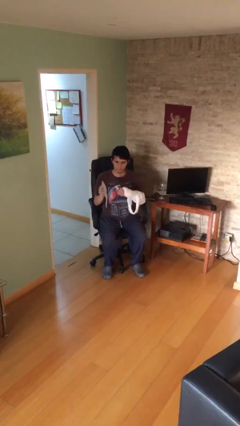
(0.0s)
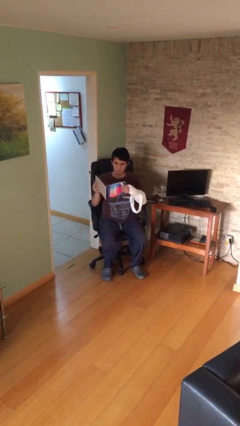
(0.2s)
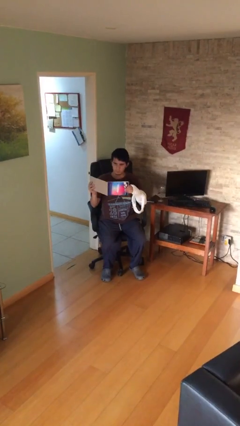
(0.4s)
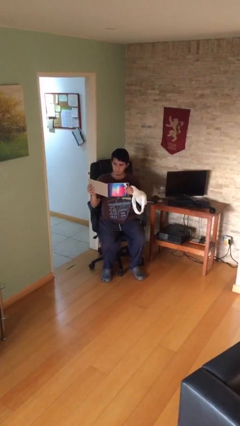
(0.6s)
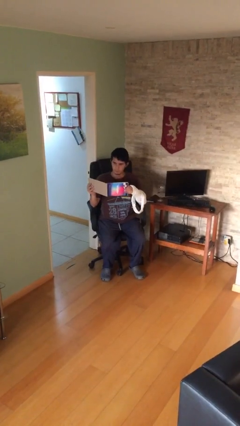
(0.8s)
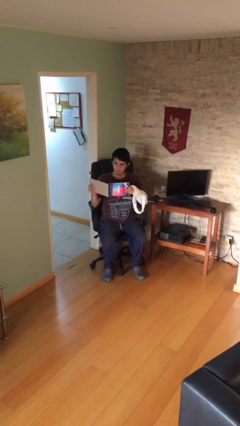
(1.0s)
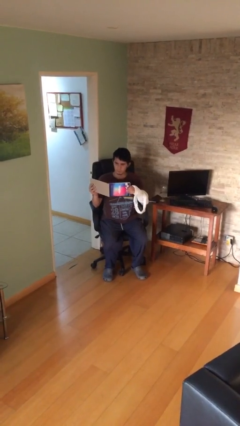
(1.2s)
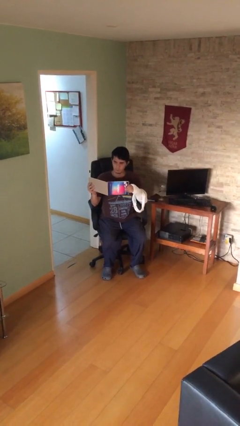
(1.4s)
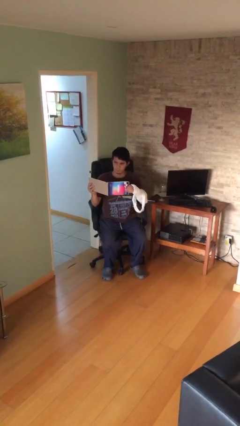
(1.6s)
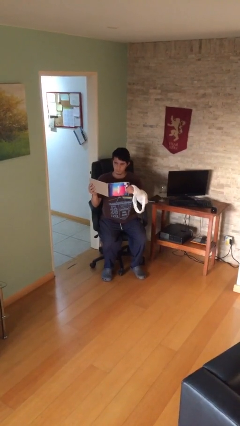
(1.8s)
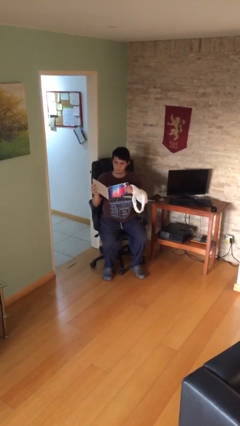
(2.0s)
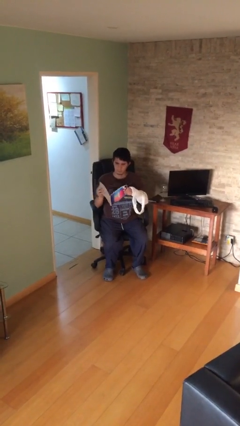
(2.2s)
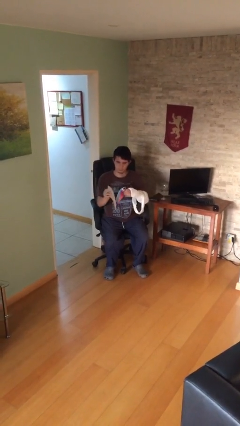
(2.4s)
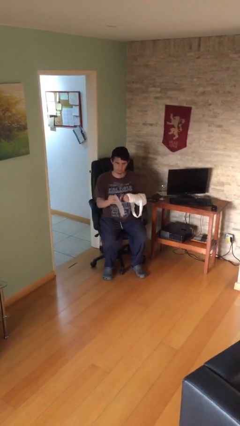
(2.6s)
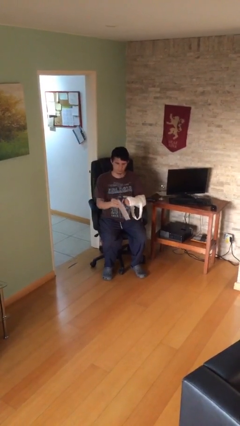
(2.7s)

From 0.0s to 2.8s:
person reads document

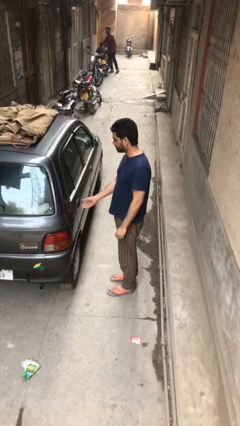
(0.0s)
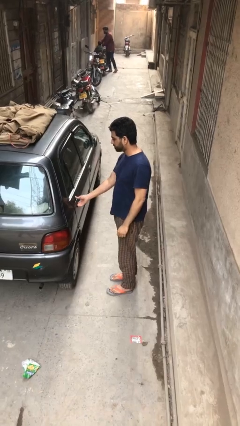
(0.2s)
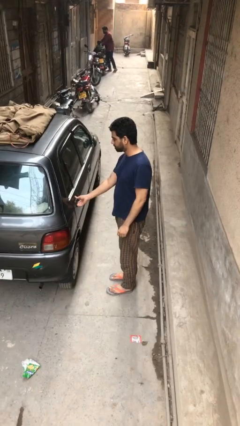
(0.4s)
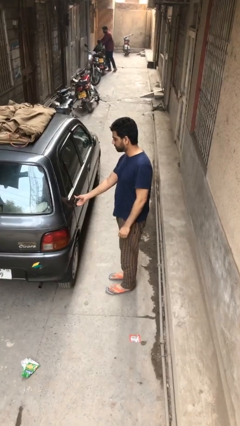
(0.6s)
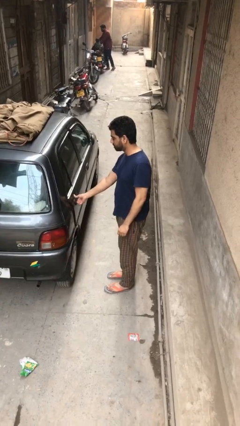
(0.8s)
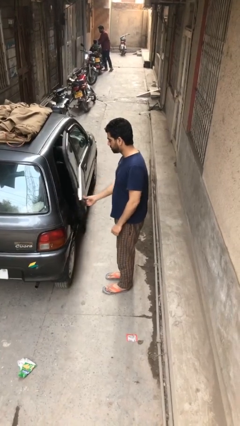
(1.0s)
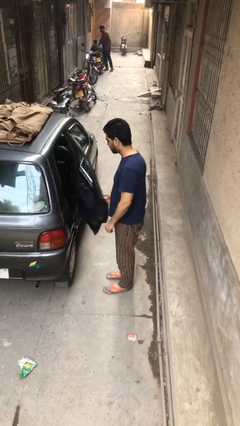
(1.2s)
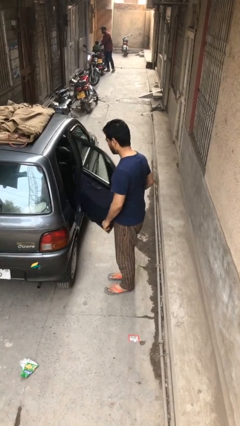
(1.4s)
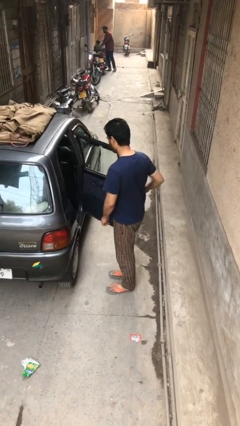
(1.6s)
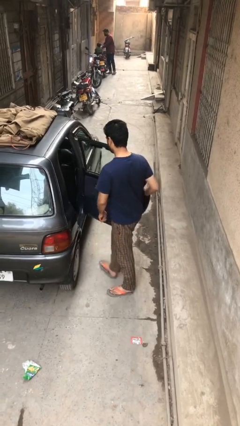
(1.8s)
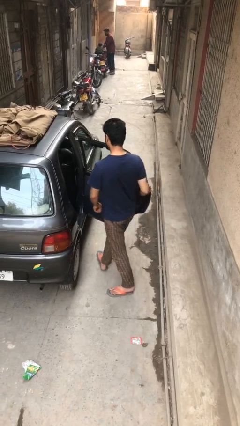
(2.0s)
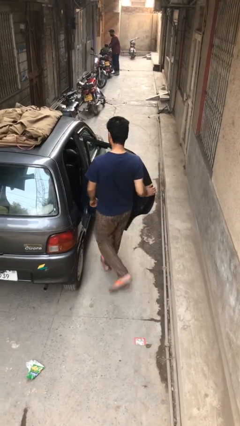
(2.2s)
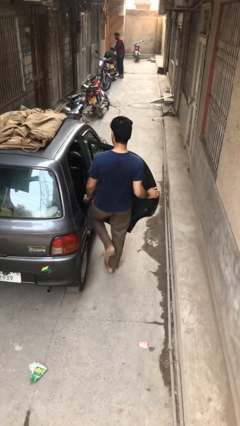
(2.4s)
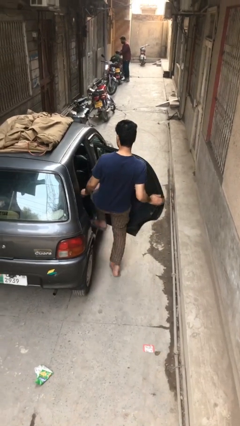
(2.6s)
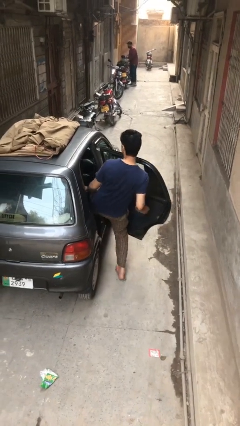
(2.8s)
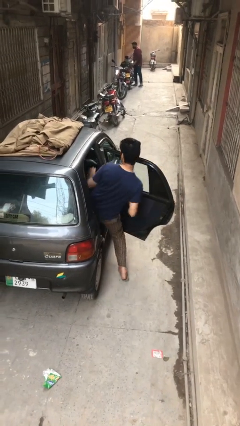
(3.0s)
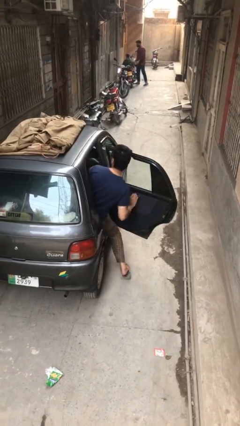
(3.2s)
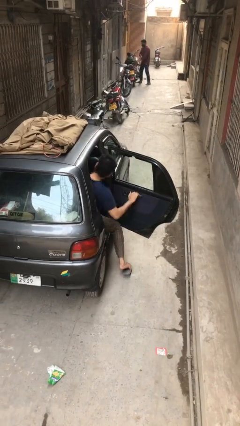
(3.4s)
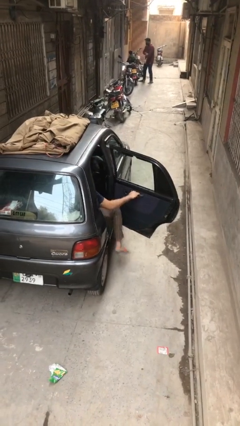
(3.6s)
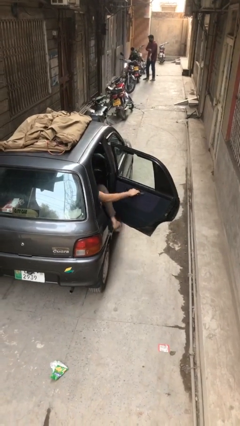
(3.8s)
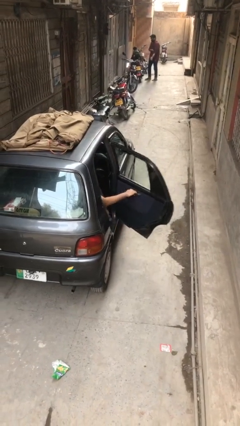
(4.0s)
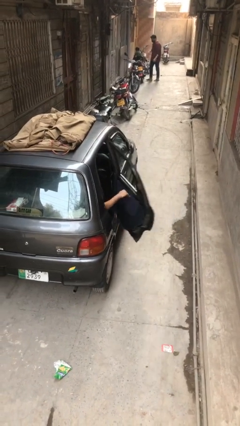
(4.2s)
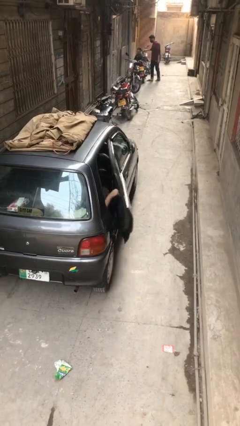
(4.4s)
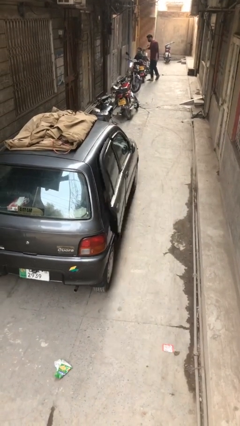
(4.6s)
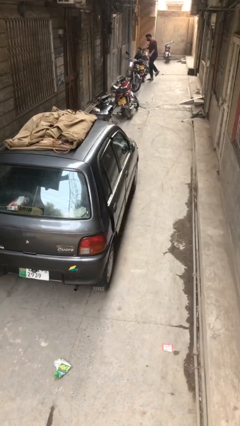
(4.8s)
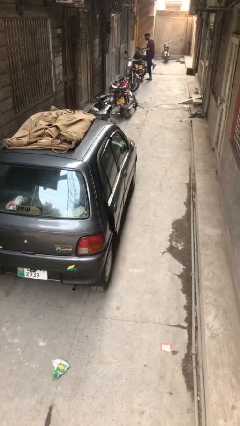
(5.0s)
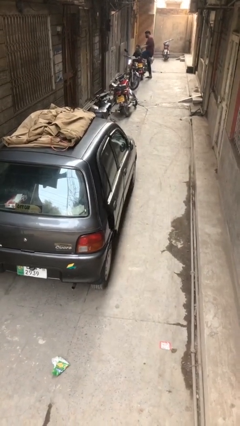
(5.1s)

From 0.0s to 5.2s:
car picks up person

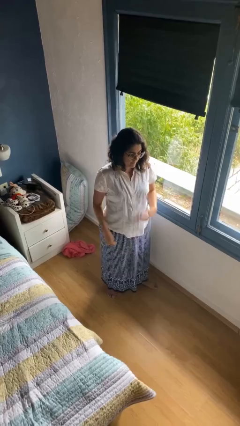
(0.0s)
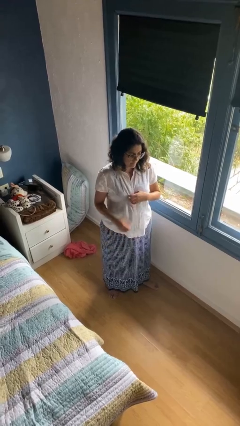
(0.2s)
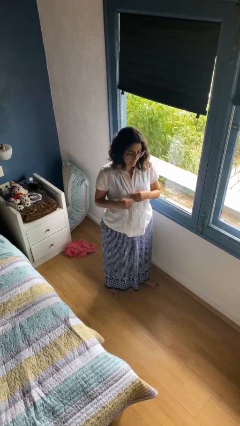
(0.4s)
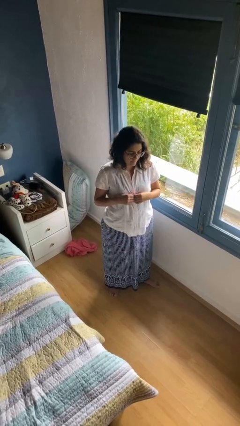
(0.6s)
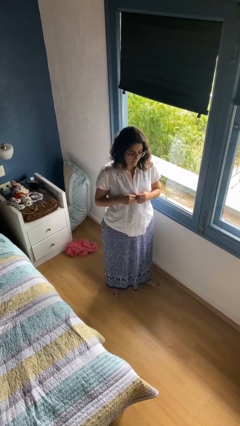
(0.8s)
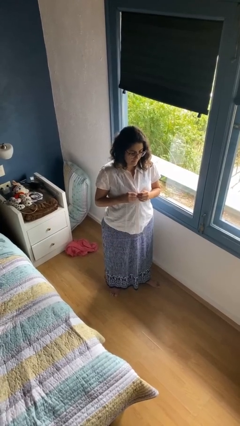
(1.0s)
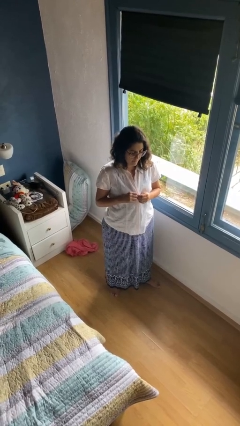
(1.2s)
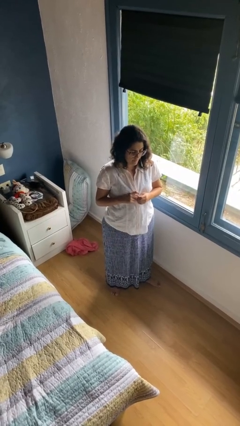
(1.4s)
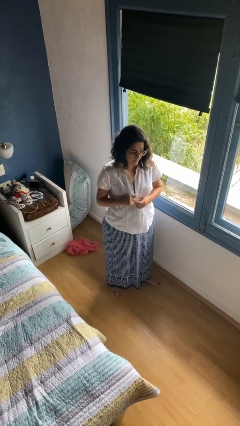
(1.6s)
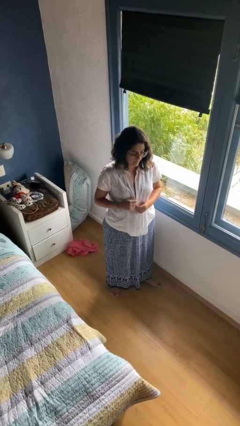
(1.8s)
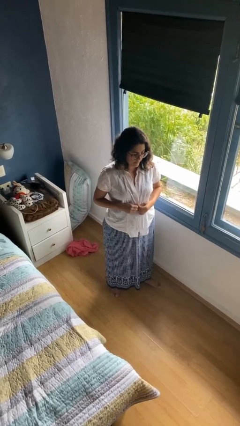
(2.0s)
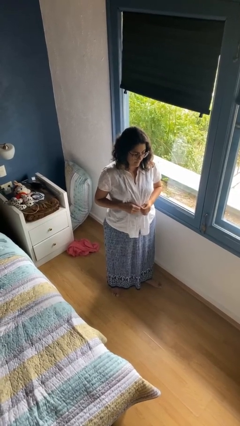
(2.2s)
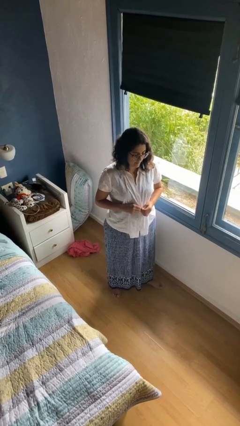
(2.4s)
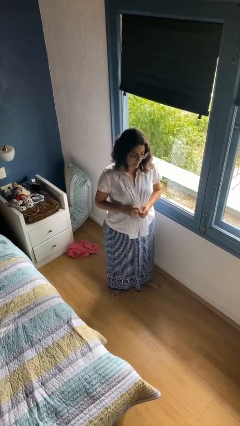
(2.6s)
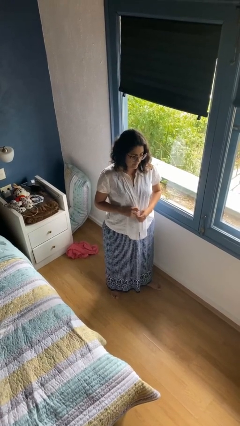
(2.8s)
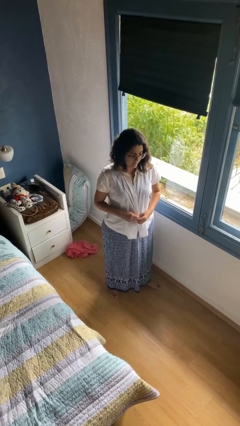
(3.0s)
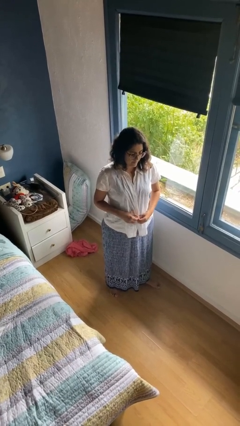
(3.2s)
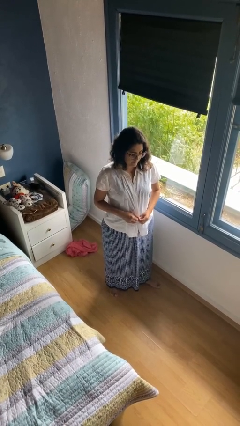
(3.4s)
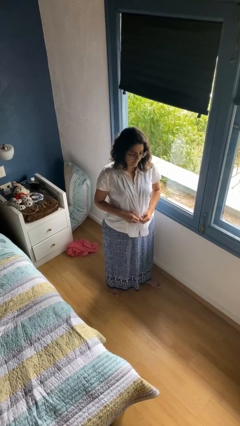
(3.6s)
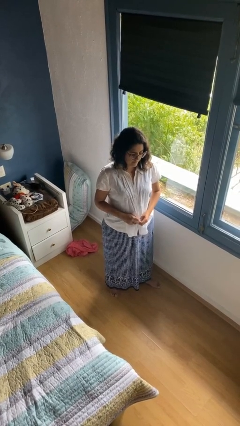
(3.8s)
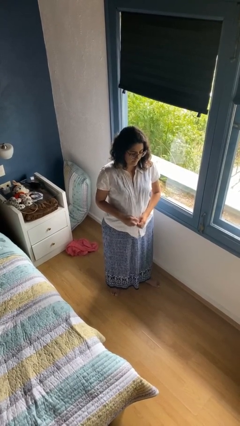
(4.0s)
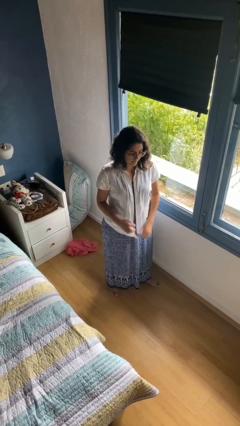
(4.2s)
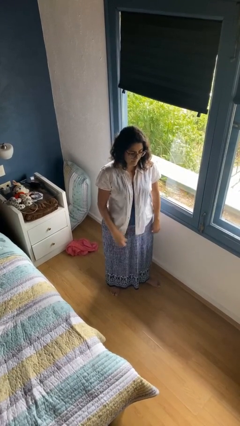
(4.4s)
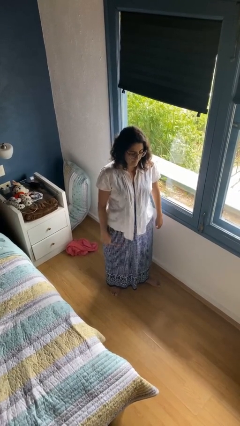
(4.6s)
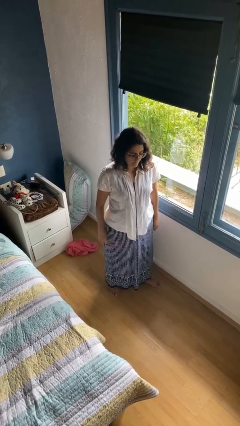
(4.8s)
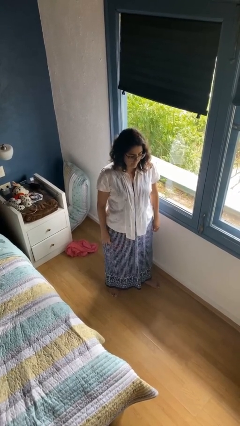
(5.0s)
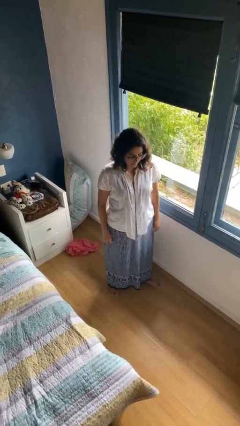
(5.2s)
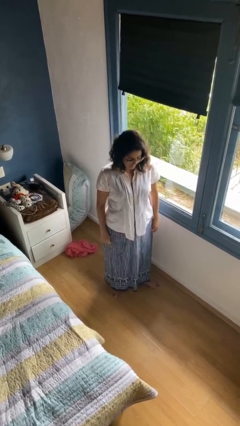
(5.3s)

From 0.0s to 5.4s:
person unbuttons shirt

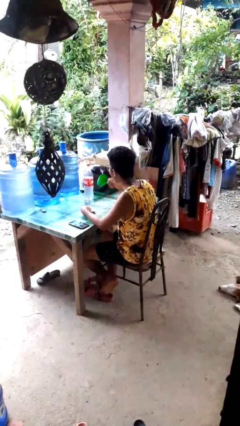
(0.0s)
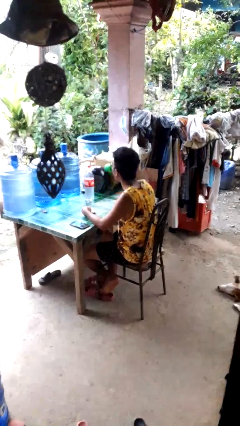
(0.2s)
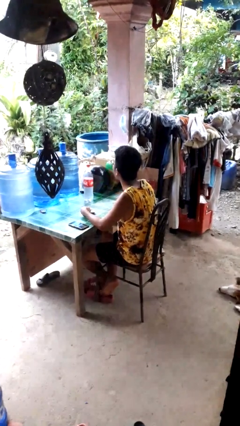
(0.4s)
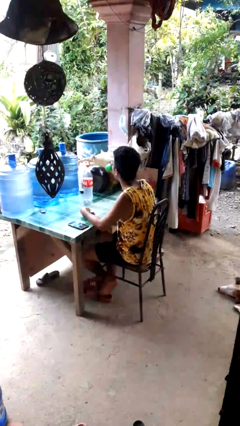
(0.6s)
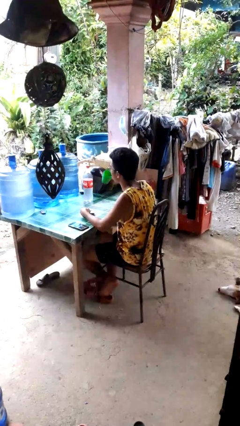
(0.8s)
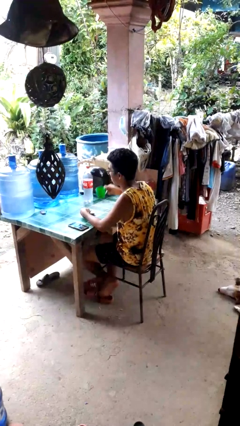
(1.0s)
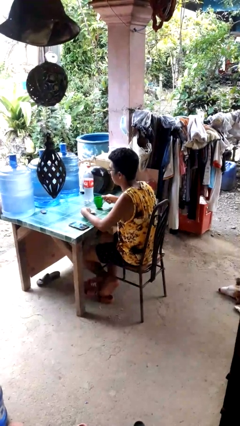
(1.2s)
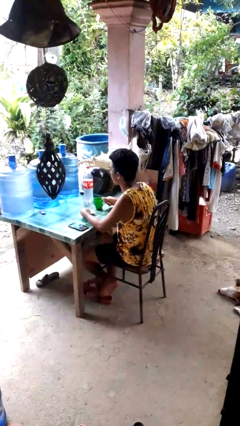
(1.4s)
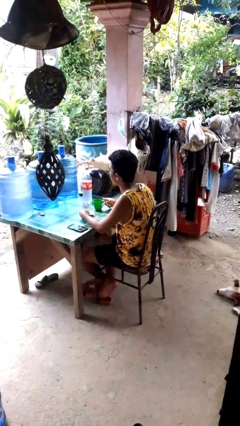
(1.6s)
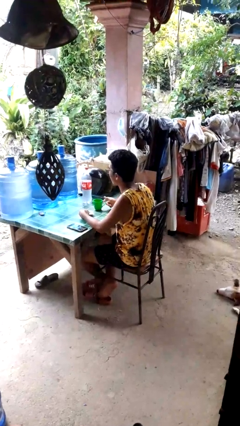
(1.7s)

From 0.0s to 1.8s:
person drinks from cup

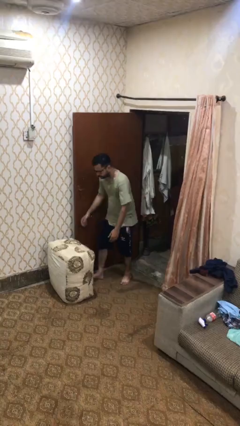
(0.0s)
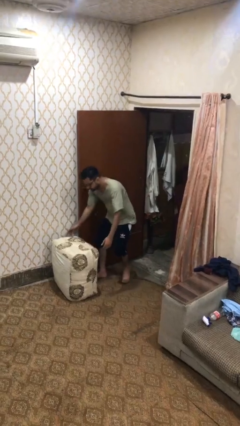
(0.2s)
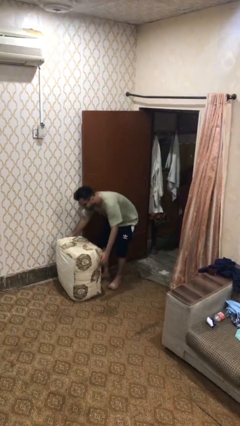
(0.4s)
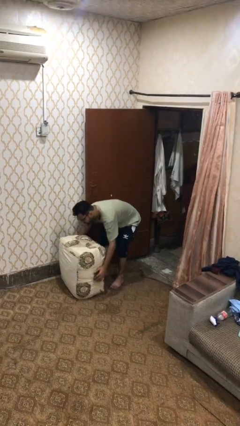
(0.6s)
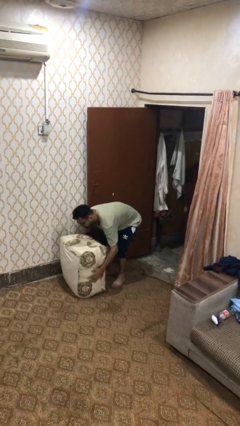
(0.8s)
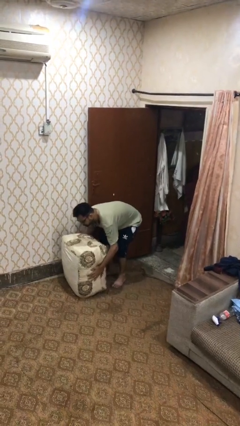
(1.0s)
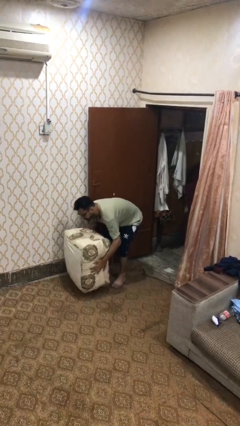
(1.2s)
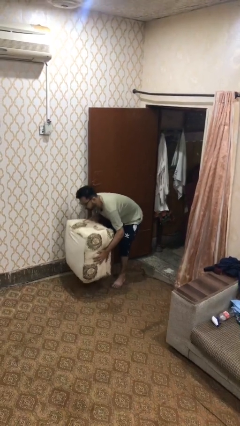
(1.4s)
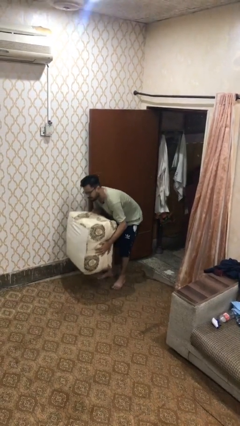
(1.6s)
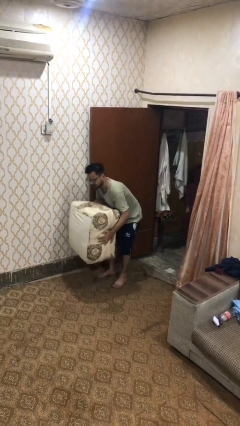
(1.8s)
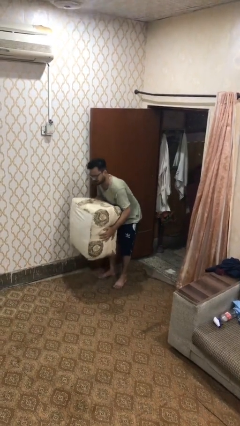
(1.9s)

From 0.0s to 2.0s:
person picks up object from floor

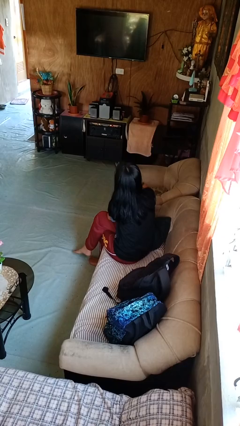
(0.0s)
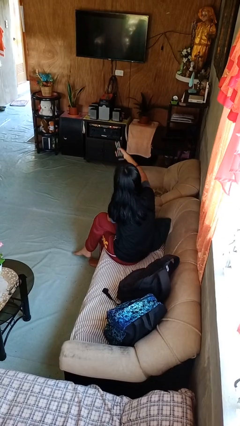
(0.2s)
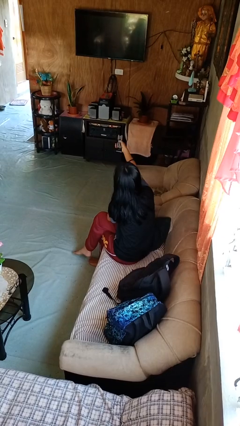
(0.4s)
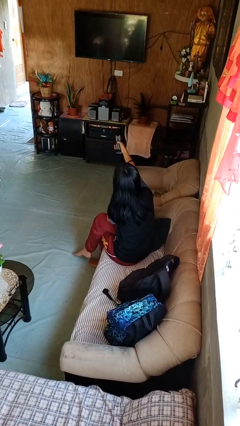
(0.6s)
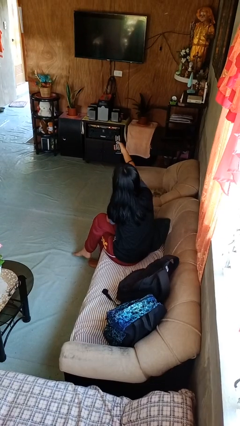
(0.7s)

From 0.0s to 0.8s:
person uses television remote
